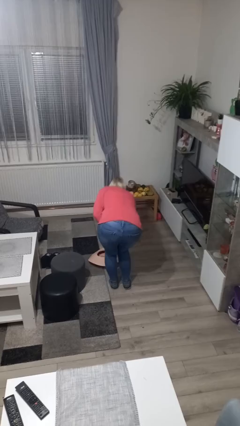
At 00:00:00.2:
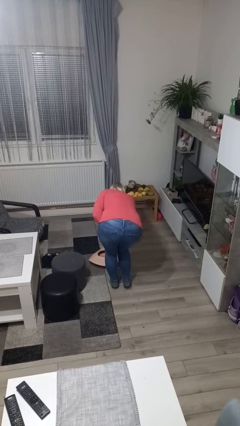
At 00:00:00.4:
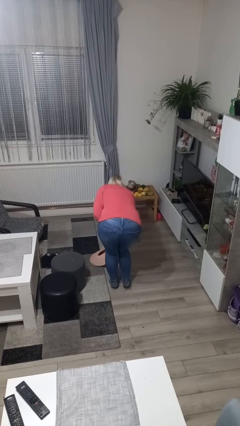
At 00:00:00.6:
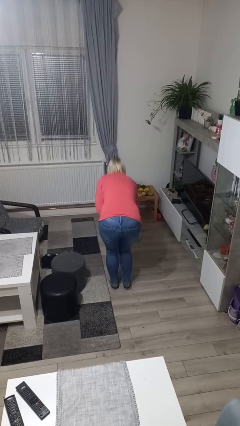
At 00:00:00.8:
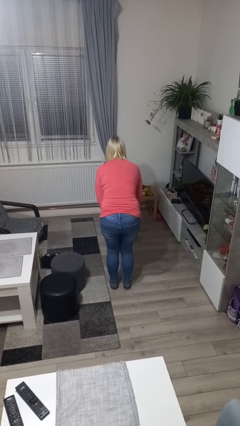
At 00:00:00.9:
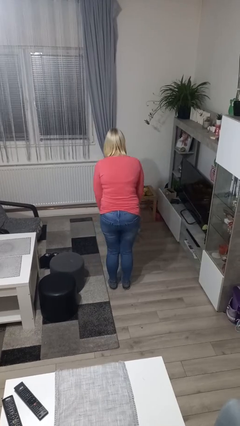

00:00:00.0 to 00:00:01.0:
person picks up object from floor

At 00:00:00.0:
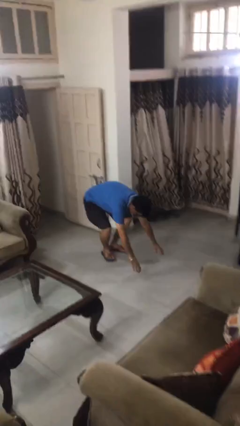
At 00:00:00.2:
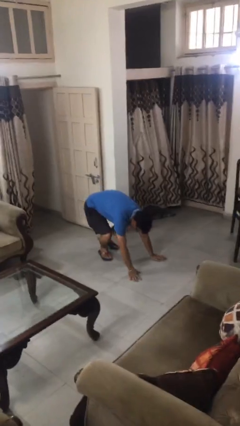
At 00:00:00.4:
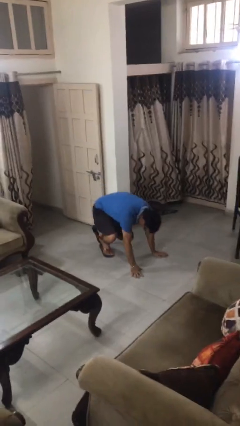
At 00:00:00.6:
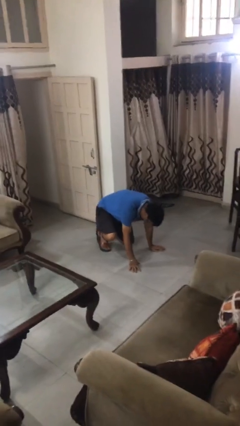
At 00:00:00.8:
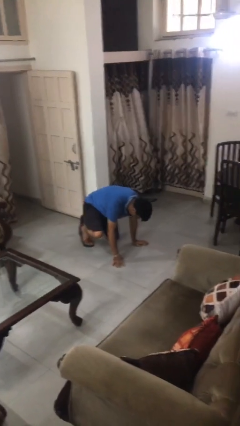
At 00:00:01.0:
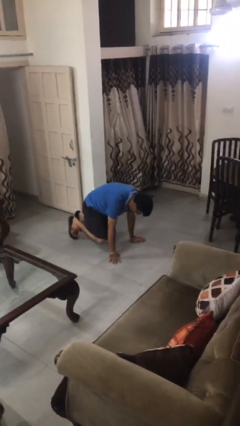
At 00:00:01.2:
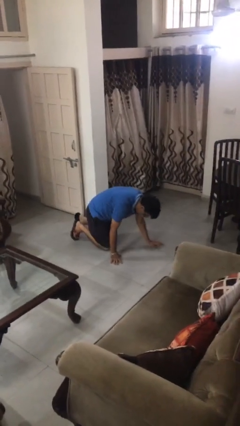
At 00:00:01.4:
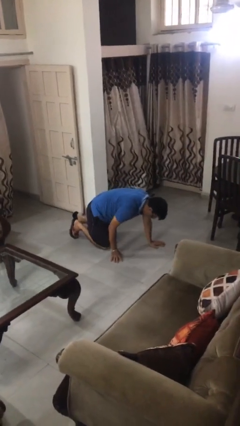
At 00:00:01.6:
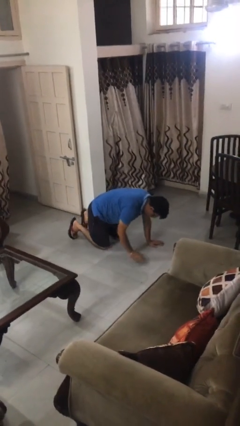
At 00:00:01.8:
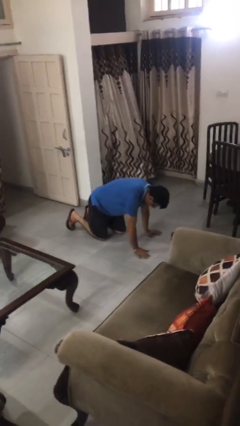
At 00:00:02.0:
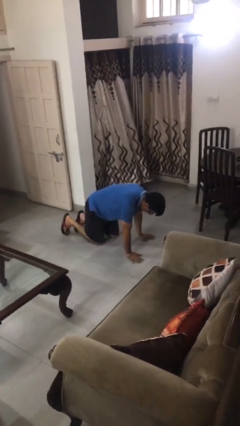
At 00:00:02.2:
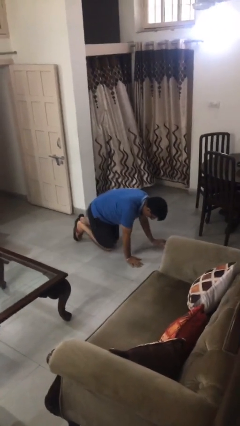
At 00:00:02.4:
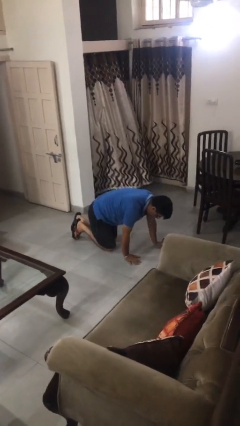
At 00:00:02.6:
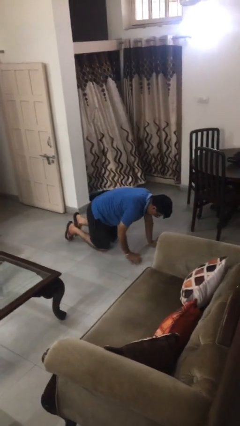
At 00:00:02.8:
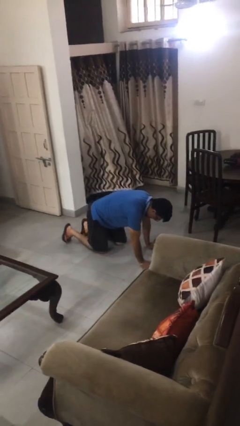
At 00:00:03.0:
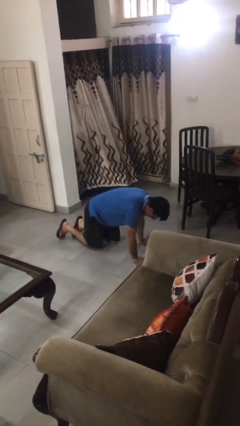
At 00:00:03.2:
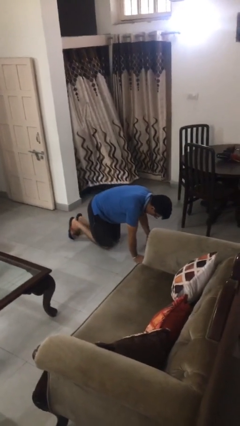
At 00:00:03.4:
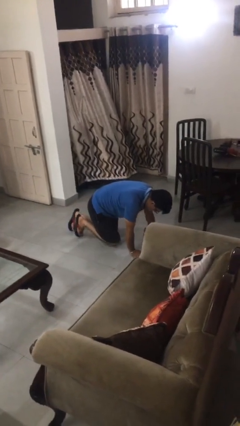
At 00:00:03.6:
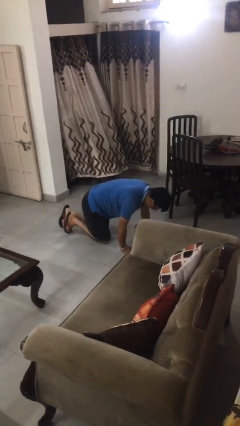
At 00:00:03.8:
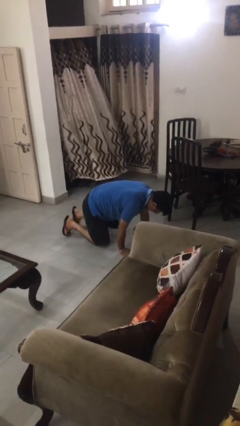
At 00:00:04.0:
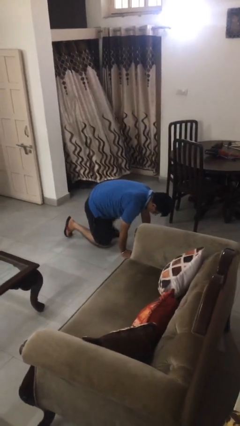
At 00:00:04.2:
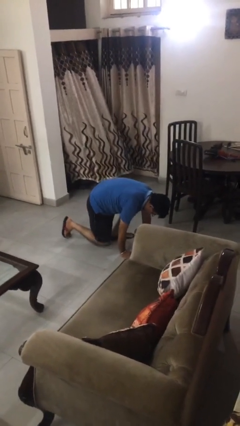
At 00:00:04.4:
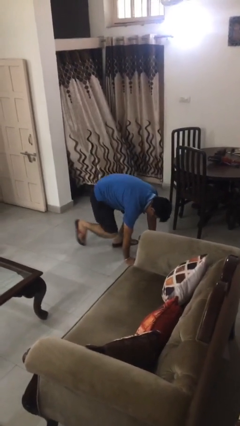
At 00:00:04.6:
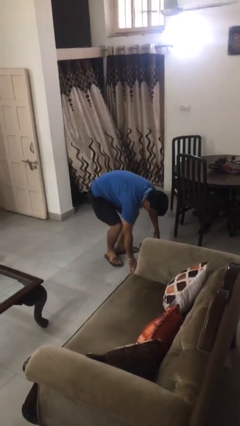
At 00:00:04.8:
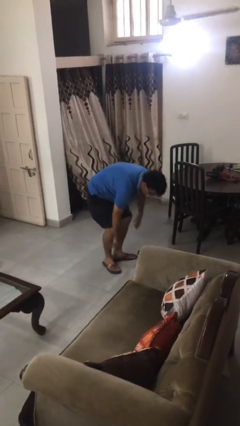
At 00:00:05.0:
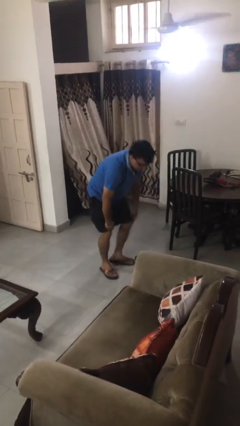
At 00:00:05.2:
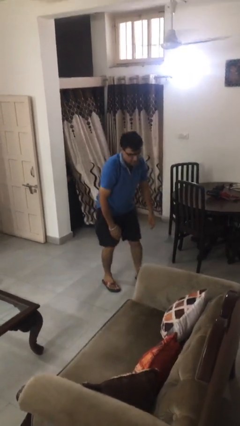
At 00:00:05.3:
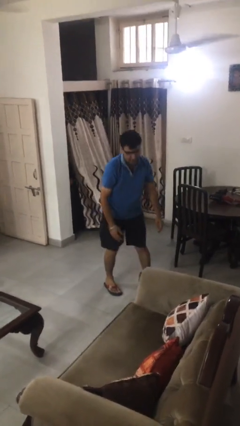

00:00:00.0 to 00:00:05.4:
person crawls

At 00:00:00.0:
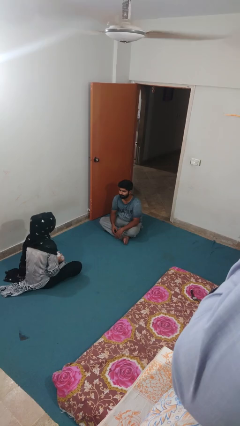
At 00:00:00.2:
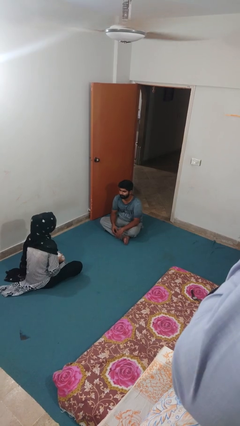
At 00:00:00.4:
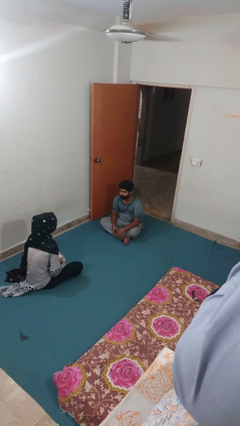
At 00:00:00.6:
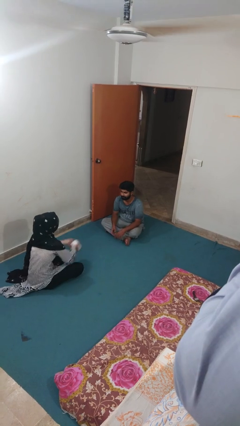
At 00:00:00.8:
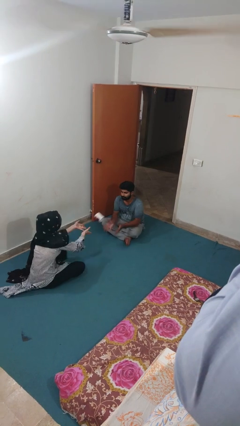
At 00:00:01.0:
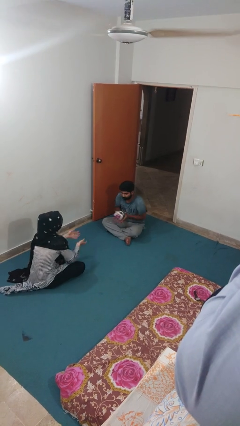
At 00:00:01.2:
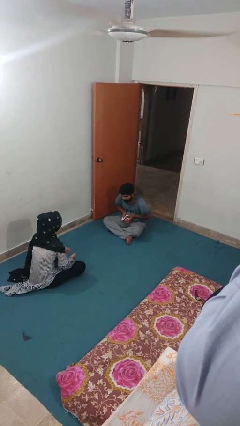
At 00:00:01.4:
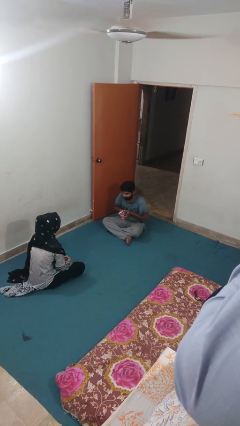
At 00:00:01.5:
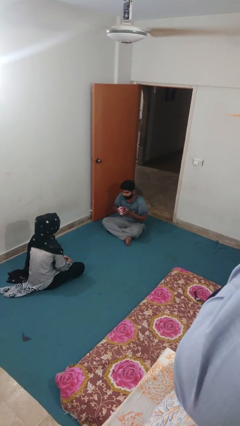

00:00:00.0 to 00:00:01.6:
person catches object from person

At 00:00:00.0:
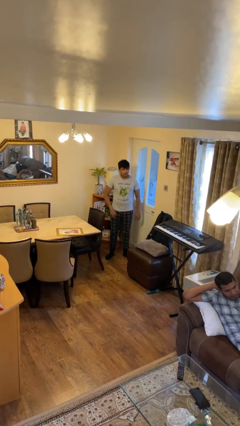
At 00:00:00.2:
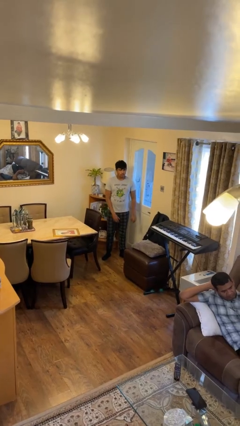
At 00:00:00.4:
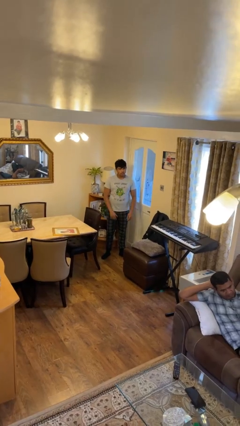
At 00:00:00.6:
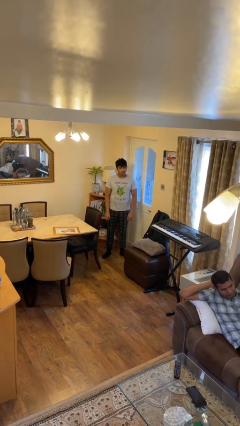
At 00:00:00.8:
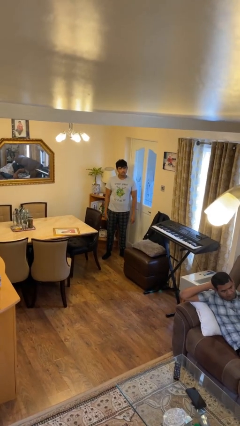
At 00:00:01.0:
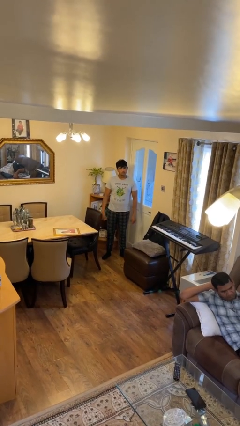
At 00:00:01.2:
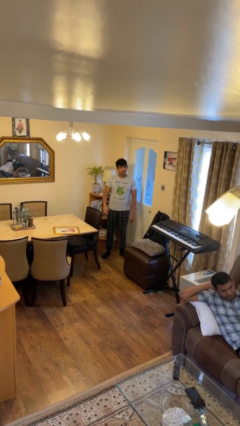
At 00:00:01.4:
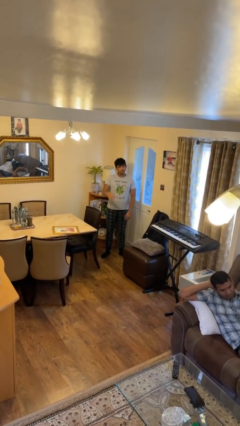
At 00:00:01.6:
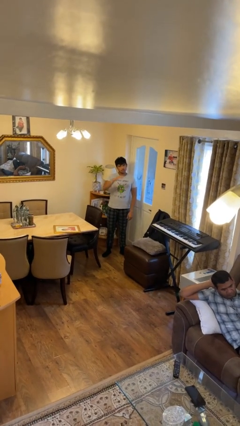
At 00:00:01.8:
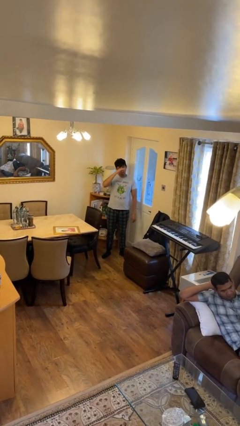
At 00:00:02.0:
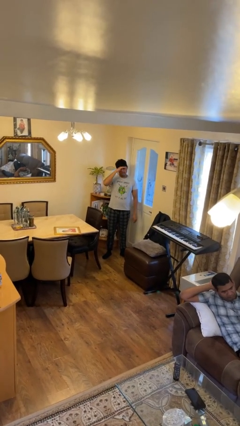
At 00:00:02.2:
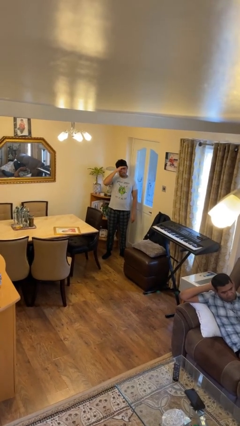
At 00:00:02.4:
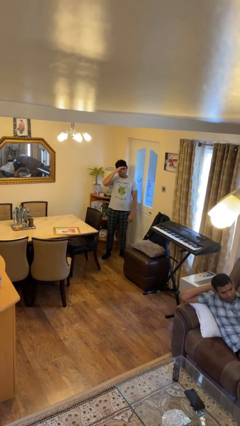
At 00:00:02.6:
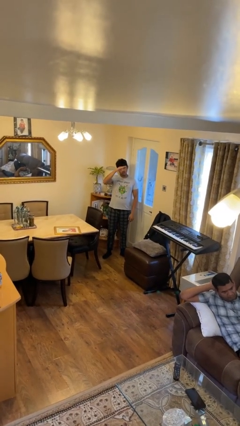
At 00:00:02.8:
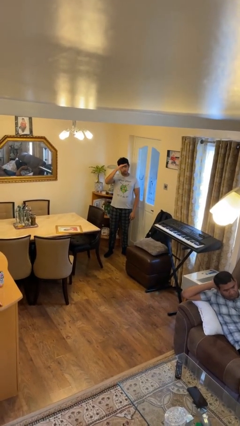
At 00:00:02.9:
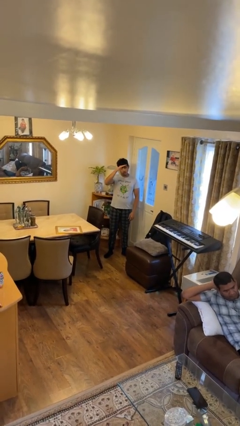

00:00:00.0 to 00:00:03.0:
person salutes

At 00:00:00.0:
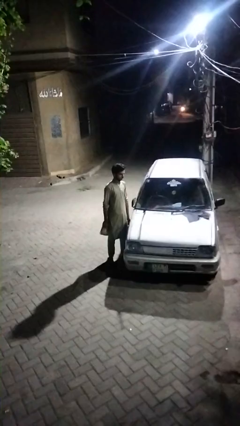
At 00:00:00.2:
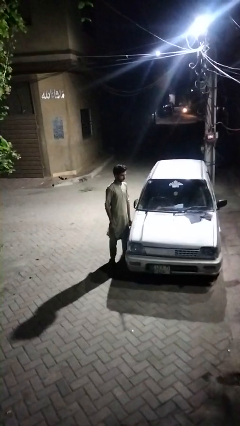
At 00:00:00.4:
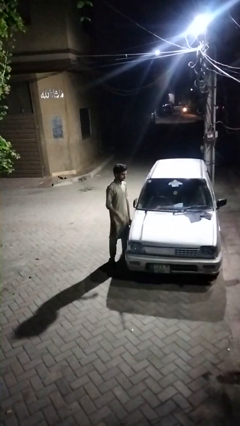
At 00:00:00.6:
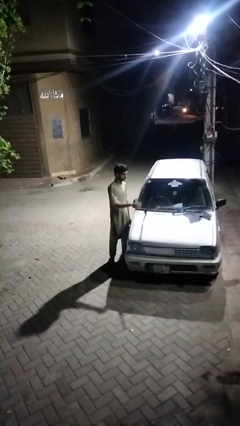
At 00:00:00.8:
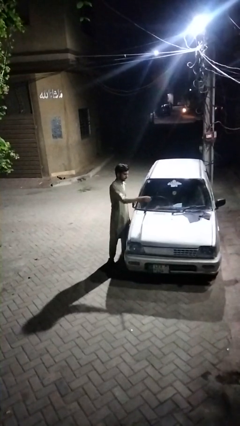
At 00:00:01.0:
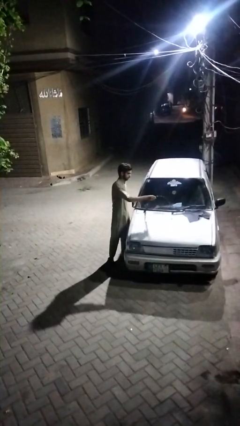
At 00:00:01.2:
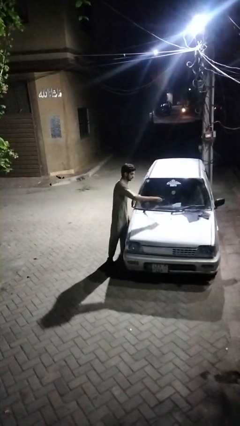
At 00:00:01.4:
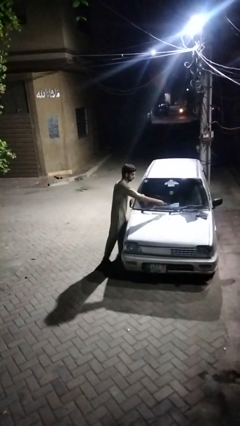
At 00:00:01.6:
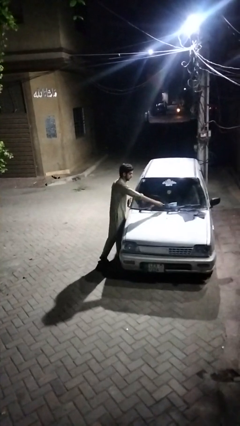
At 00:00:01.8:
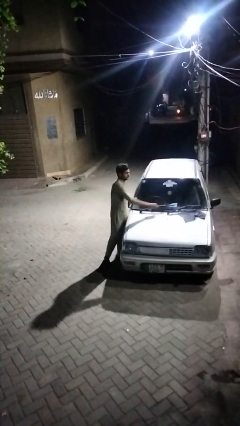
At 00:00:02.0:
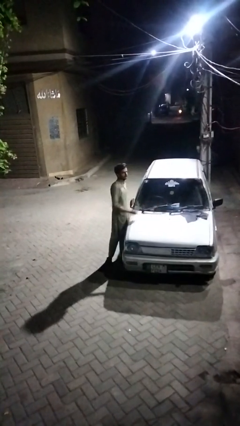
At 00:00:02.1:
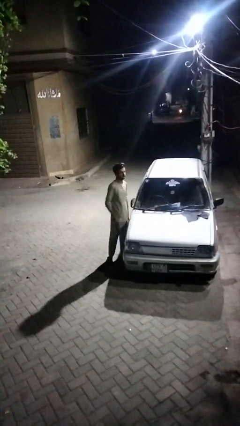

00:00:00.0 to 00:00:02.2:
person flips down car wipers

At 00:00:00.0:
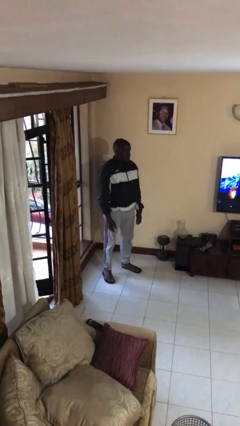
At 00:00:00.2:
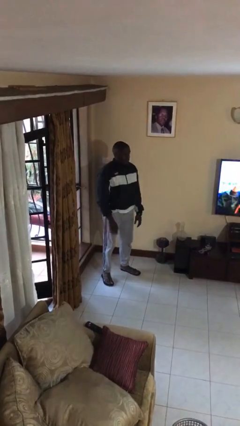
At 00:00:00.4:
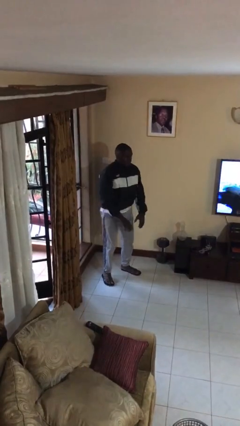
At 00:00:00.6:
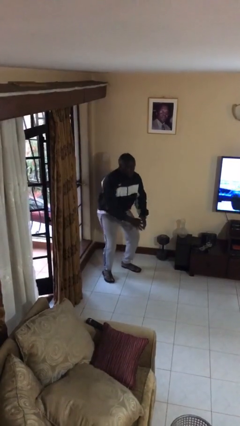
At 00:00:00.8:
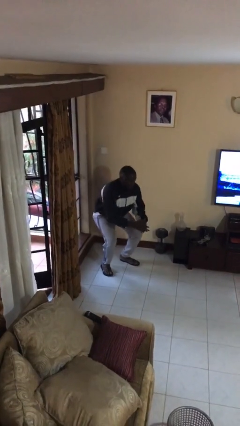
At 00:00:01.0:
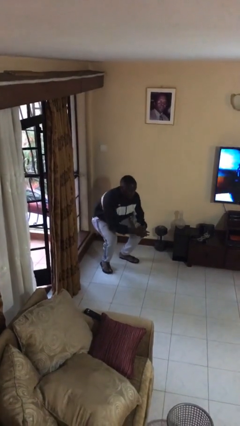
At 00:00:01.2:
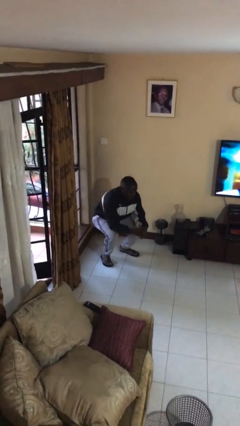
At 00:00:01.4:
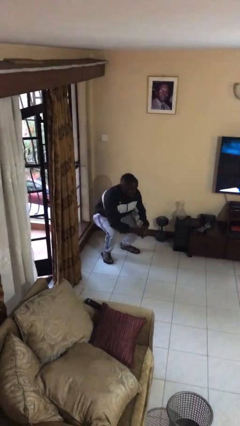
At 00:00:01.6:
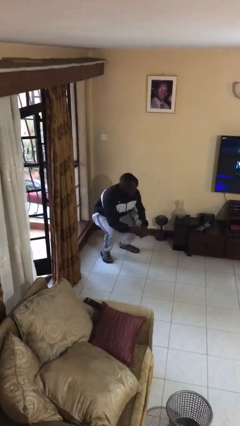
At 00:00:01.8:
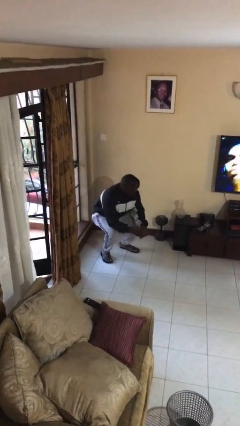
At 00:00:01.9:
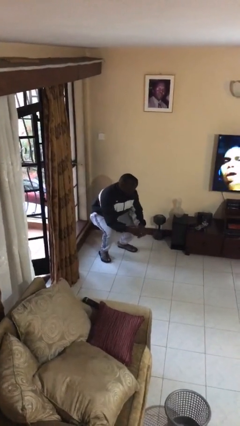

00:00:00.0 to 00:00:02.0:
person squats

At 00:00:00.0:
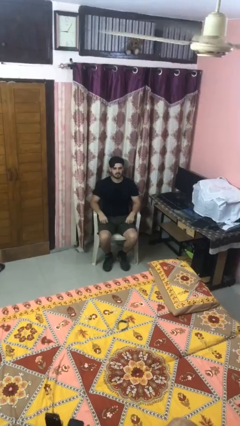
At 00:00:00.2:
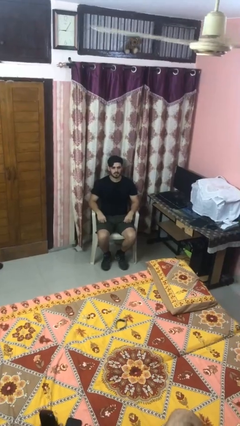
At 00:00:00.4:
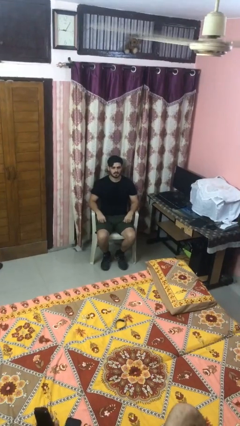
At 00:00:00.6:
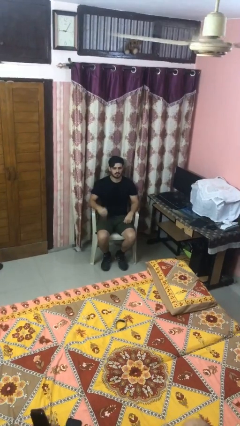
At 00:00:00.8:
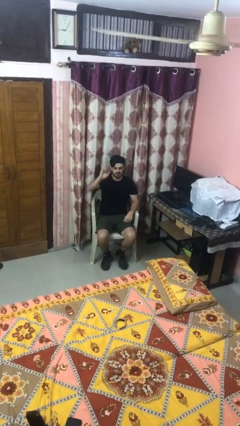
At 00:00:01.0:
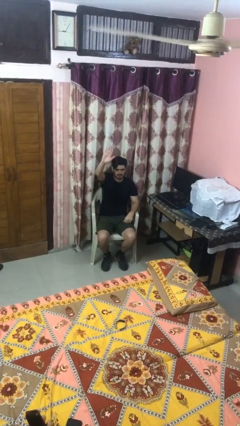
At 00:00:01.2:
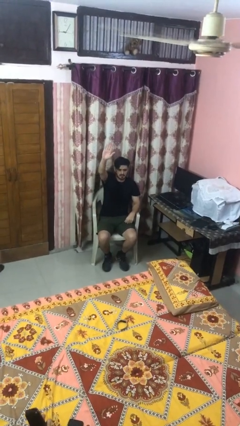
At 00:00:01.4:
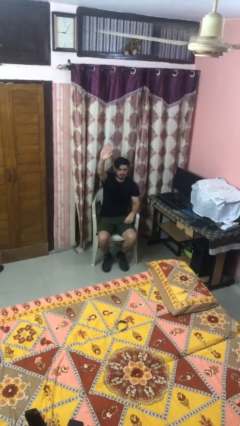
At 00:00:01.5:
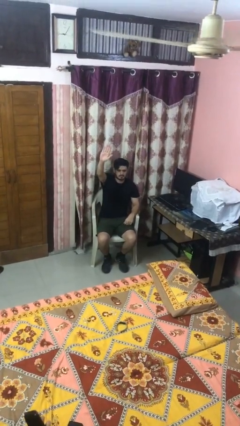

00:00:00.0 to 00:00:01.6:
person gestures raise hand
